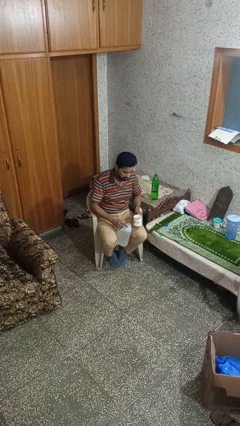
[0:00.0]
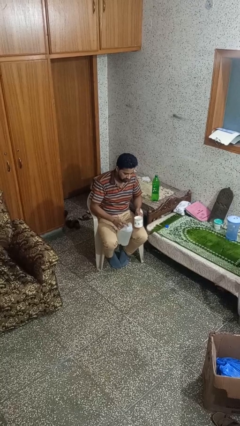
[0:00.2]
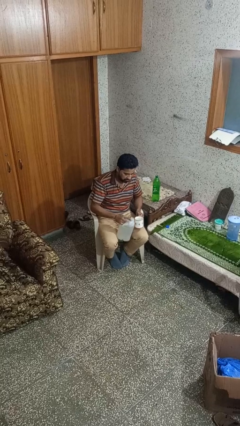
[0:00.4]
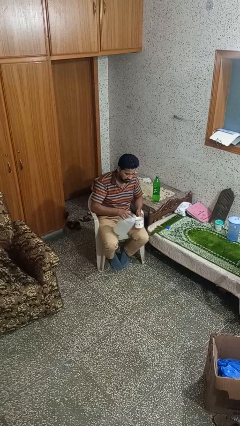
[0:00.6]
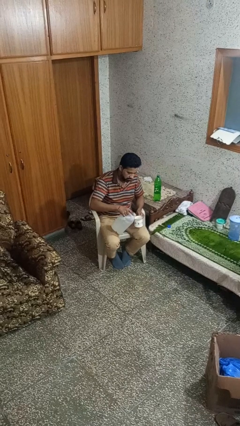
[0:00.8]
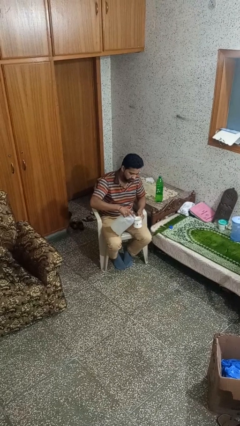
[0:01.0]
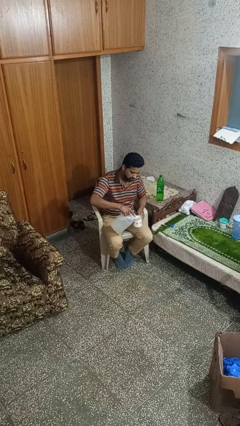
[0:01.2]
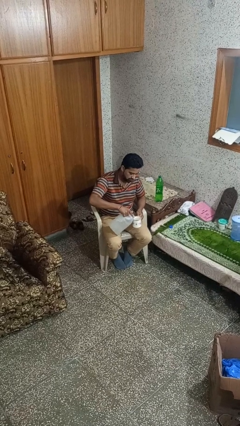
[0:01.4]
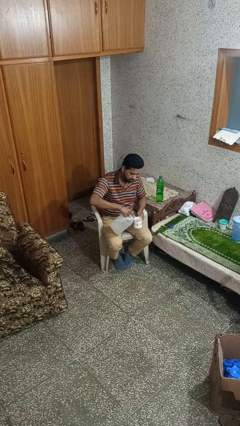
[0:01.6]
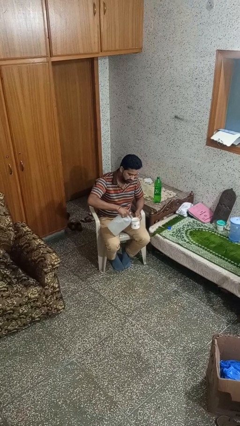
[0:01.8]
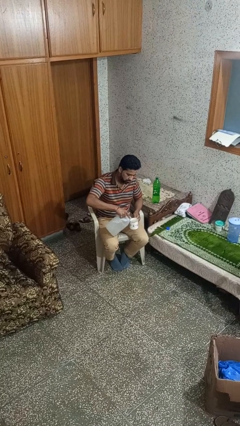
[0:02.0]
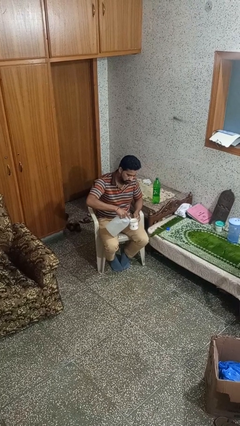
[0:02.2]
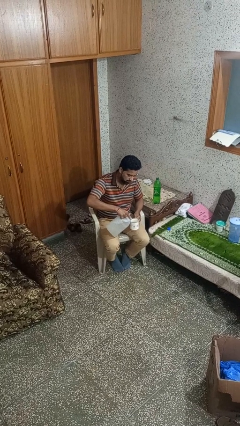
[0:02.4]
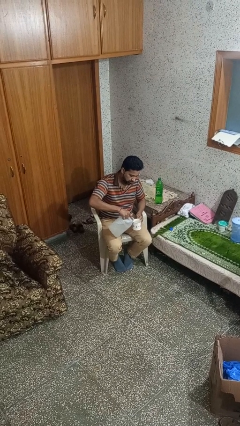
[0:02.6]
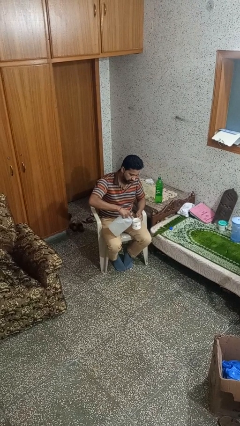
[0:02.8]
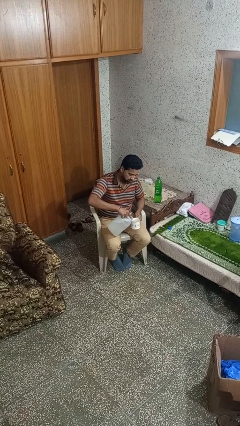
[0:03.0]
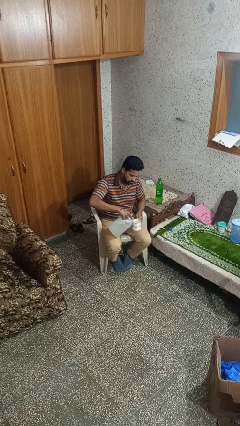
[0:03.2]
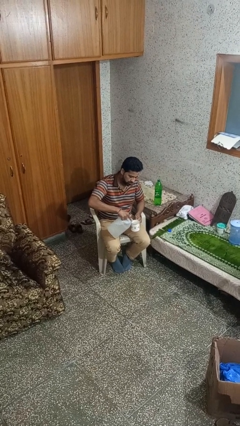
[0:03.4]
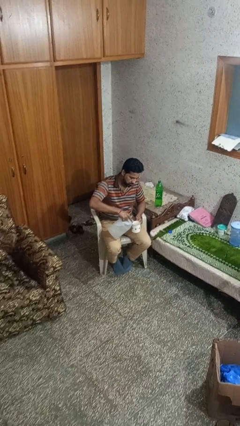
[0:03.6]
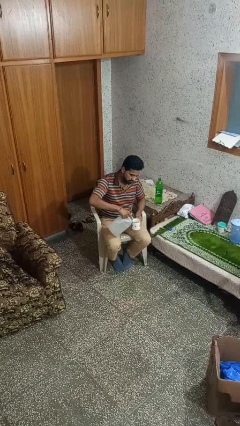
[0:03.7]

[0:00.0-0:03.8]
person pours liquid into cup

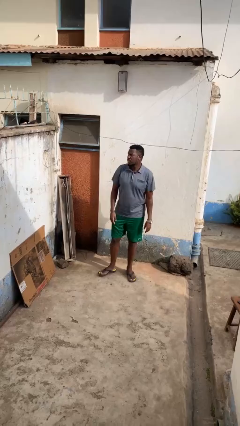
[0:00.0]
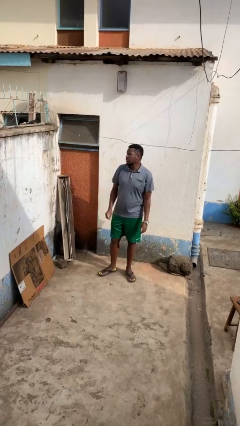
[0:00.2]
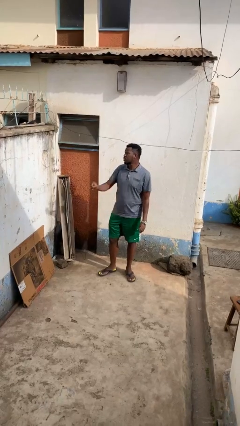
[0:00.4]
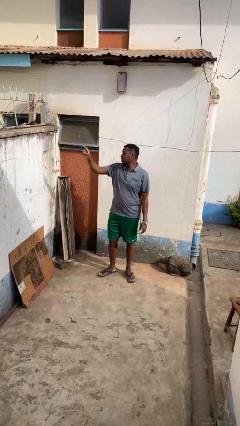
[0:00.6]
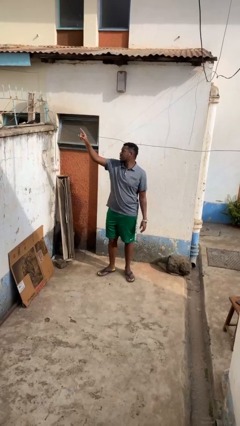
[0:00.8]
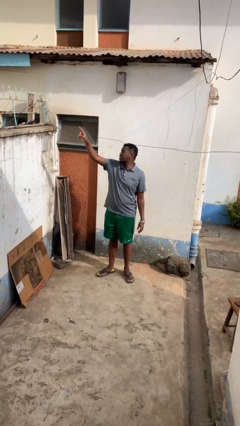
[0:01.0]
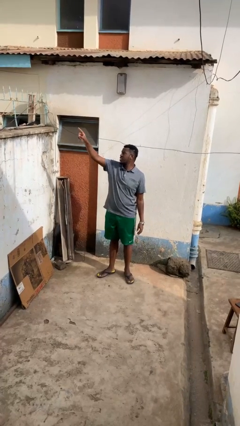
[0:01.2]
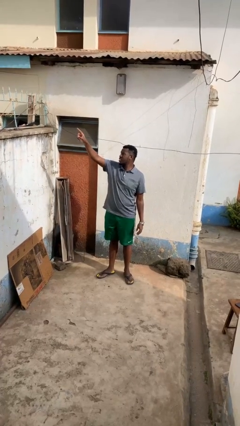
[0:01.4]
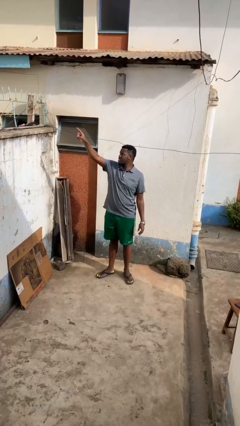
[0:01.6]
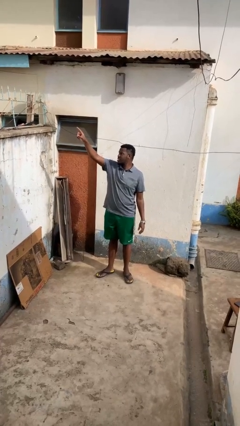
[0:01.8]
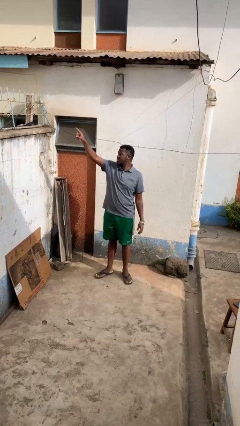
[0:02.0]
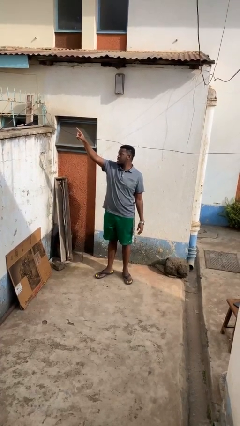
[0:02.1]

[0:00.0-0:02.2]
person points at person

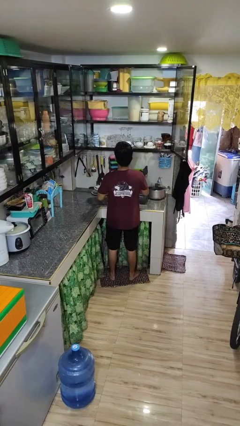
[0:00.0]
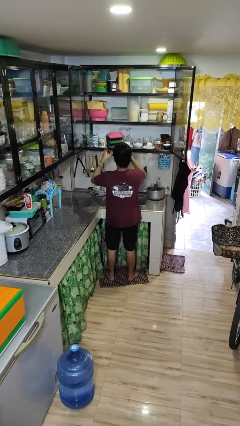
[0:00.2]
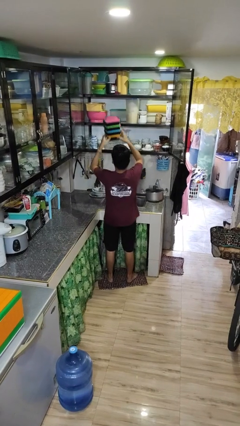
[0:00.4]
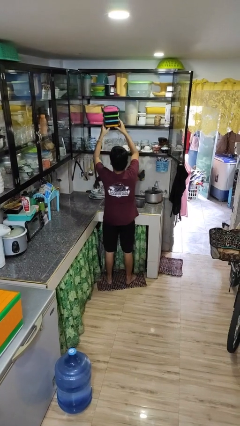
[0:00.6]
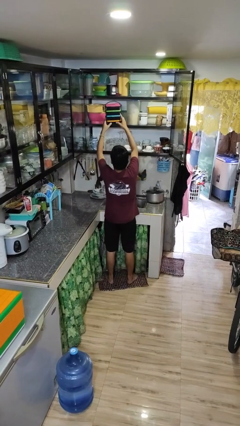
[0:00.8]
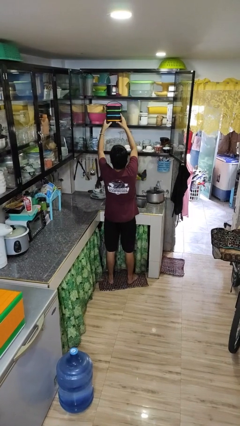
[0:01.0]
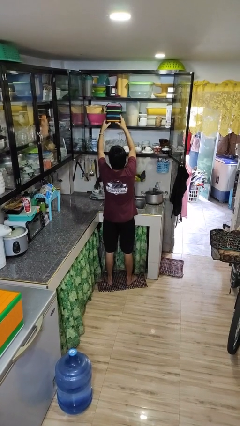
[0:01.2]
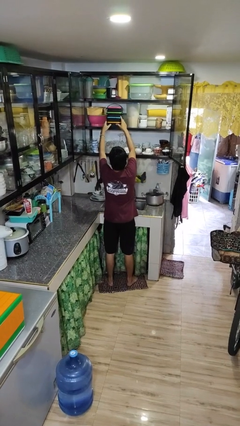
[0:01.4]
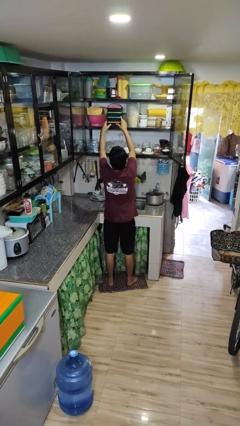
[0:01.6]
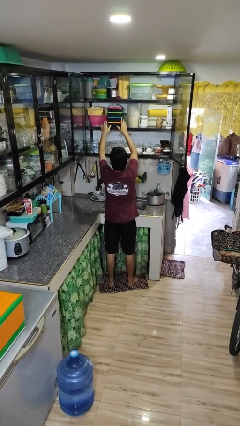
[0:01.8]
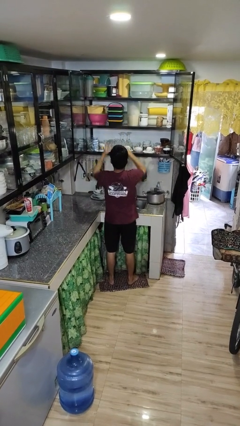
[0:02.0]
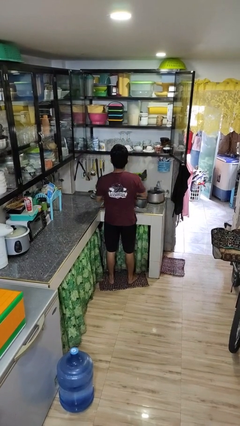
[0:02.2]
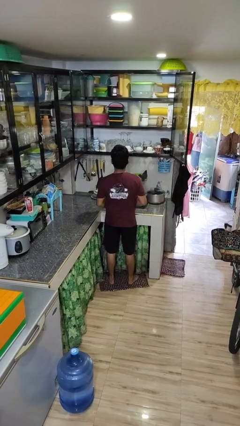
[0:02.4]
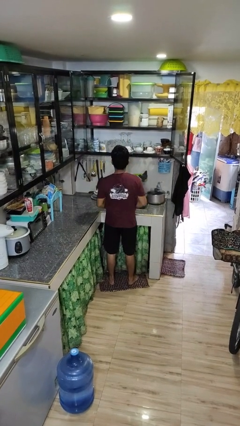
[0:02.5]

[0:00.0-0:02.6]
person puts down object into cabinet

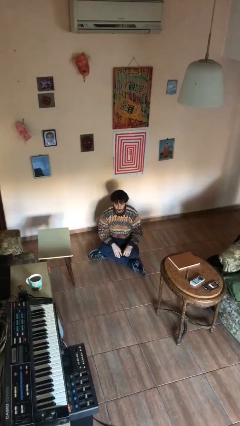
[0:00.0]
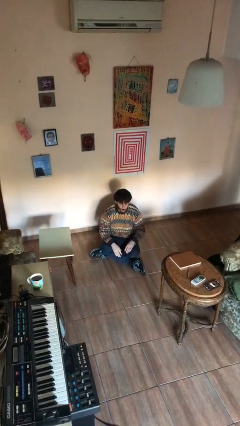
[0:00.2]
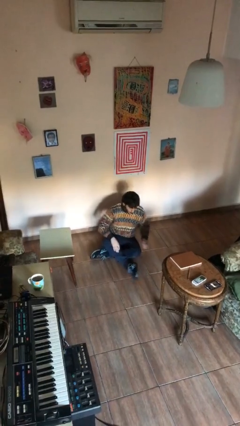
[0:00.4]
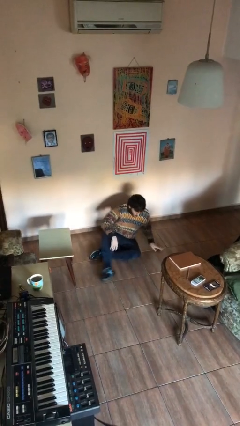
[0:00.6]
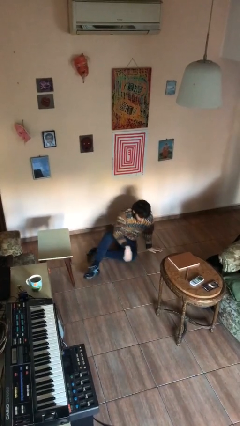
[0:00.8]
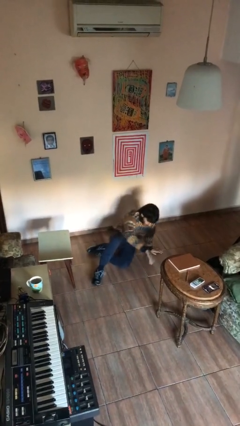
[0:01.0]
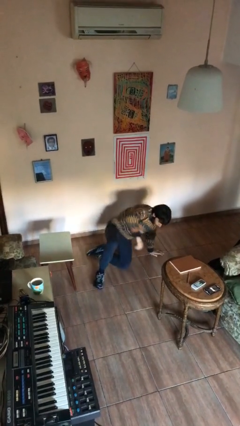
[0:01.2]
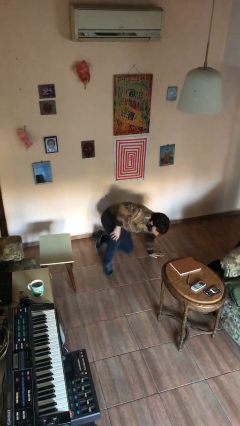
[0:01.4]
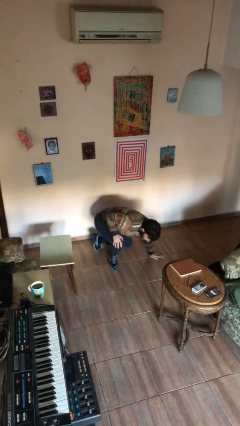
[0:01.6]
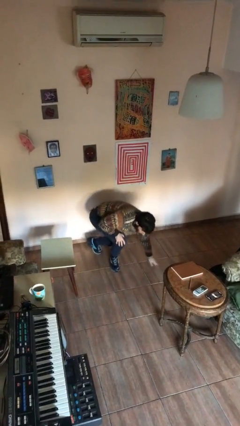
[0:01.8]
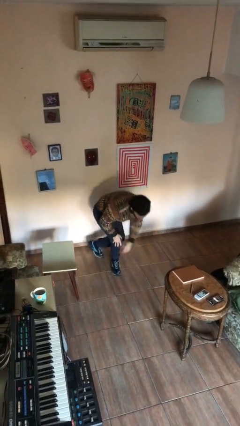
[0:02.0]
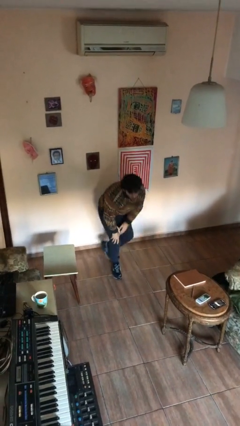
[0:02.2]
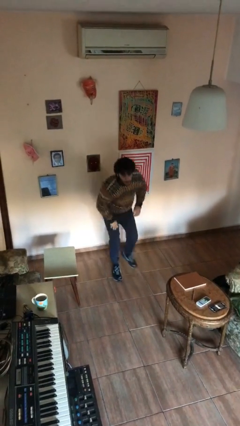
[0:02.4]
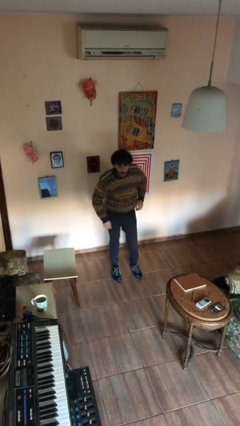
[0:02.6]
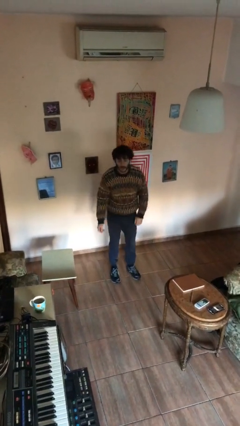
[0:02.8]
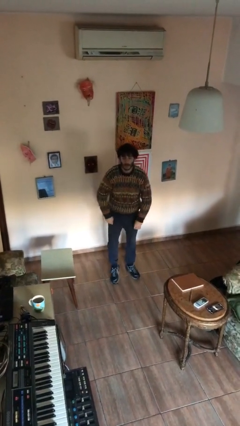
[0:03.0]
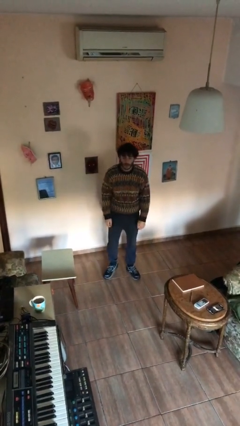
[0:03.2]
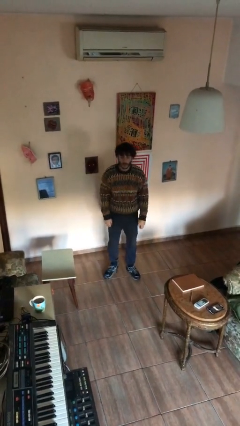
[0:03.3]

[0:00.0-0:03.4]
person stands up from floor

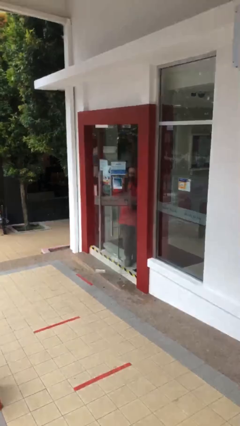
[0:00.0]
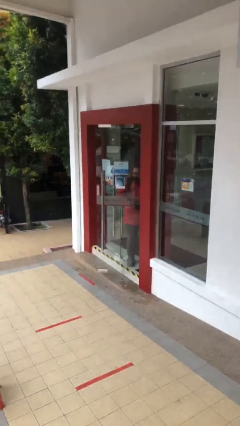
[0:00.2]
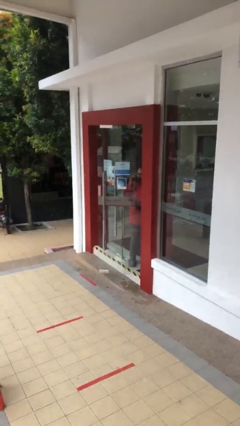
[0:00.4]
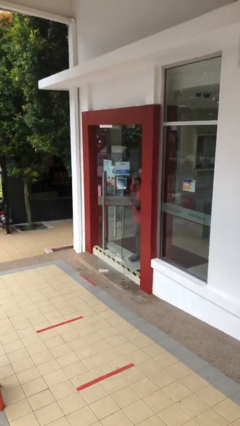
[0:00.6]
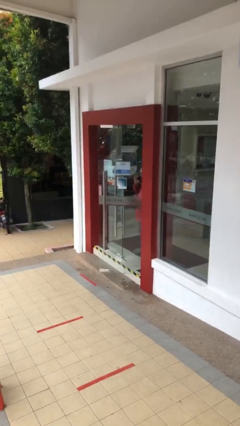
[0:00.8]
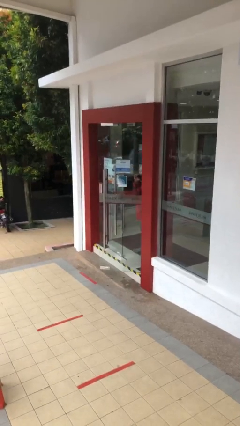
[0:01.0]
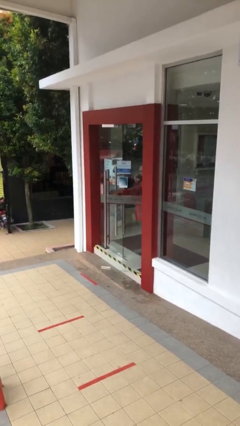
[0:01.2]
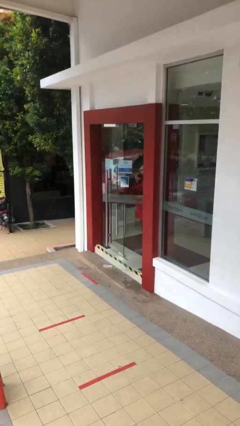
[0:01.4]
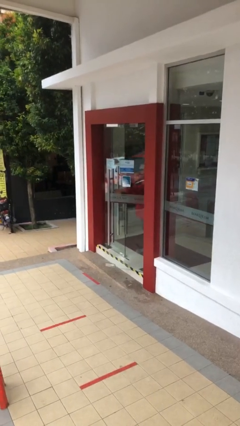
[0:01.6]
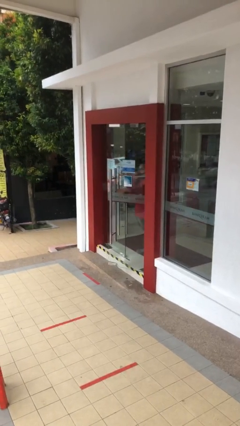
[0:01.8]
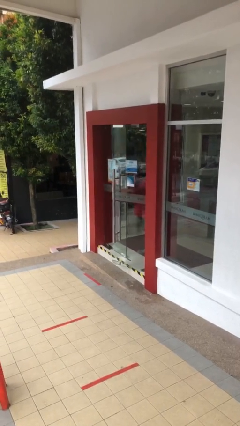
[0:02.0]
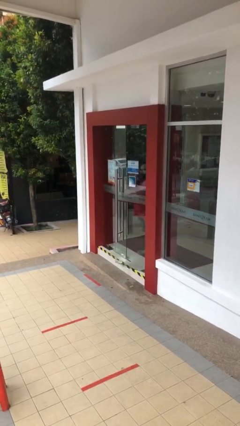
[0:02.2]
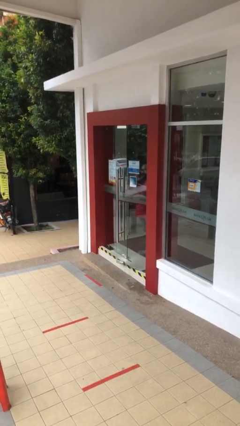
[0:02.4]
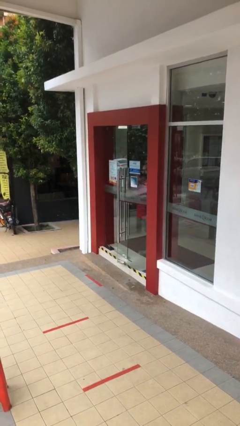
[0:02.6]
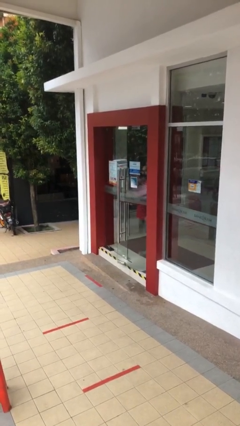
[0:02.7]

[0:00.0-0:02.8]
person closes facility door

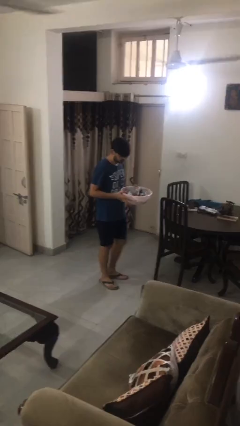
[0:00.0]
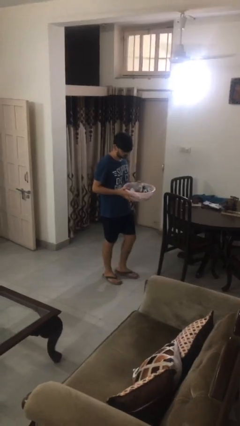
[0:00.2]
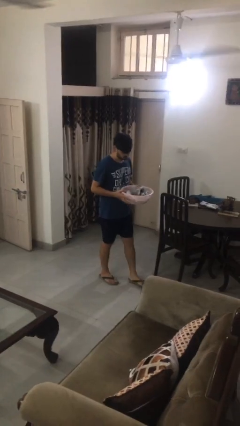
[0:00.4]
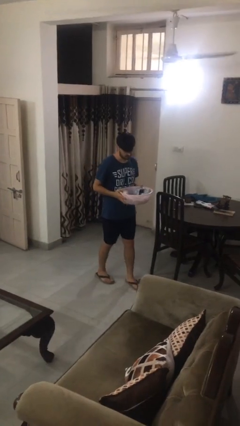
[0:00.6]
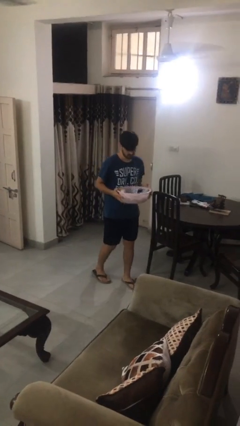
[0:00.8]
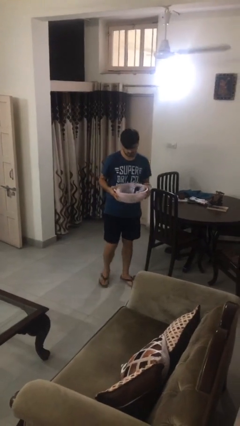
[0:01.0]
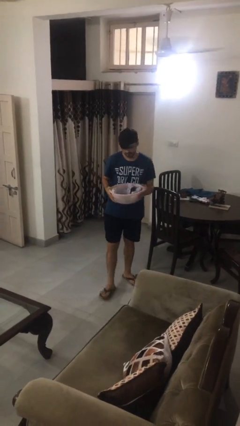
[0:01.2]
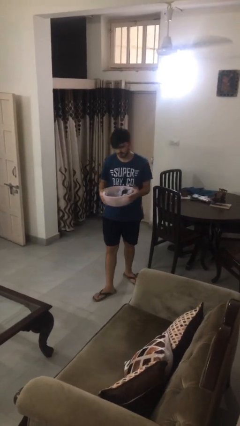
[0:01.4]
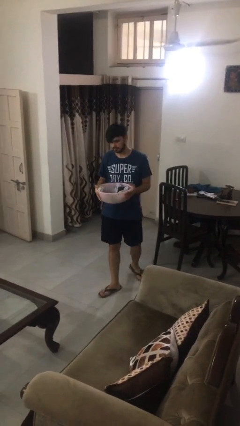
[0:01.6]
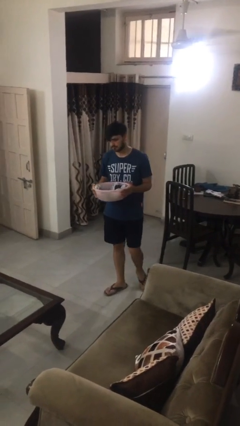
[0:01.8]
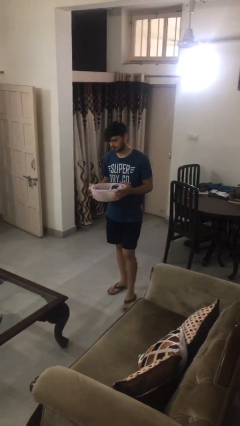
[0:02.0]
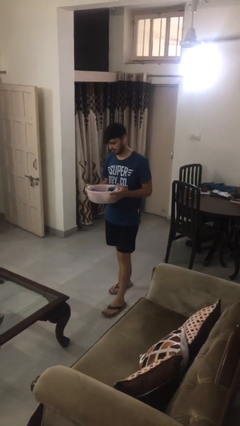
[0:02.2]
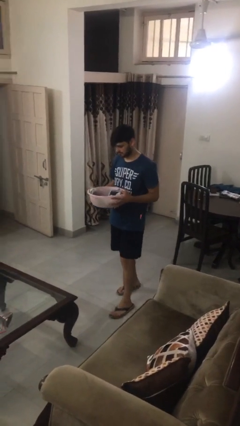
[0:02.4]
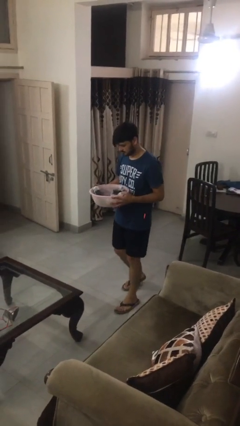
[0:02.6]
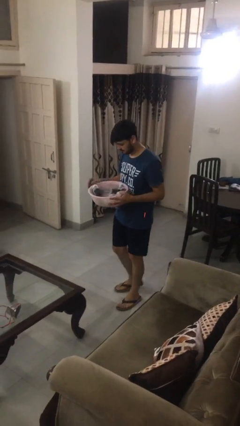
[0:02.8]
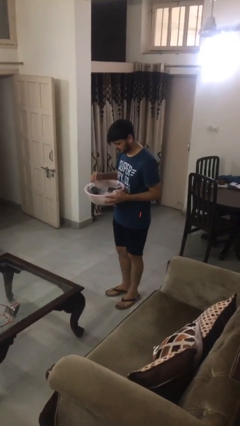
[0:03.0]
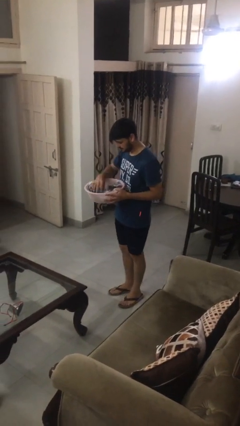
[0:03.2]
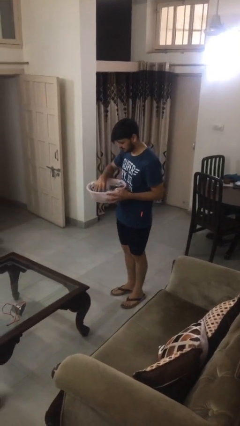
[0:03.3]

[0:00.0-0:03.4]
person carries groceries
